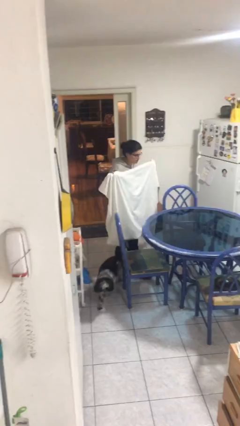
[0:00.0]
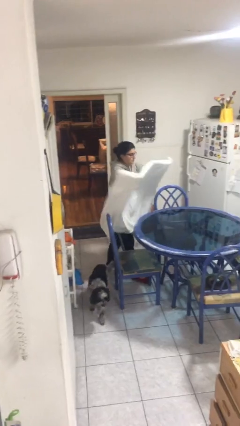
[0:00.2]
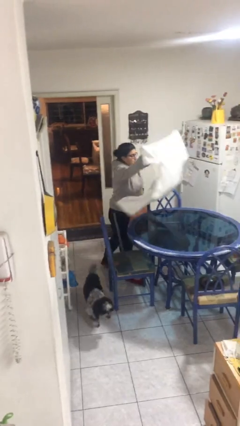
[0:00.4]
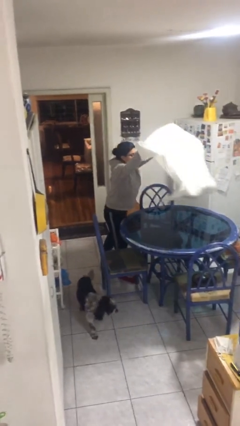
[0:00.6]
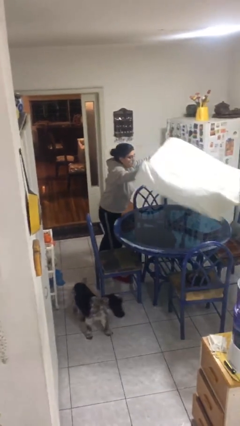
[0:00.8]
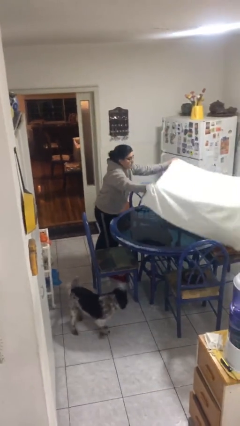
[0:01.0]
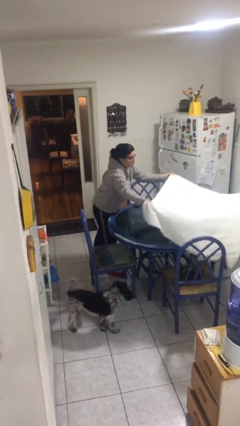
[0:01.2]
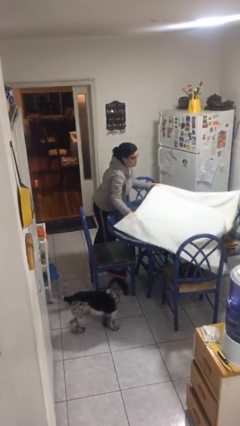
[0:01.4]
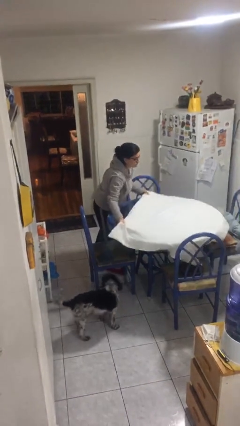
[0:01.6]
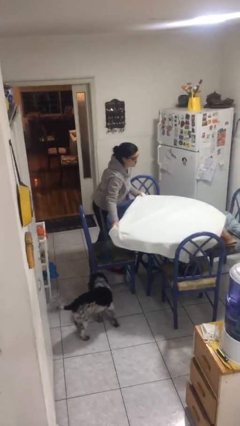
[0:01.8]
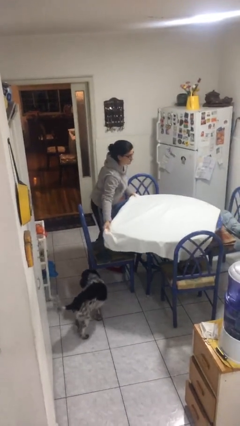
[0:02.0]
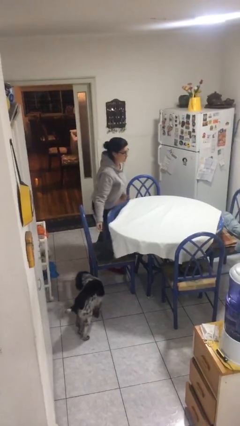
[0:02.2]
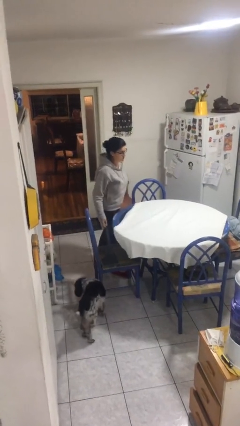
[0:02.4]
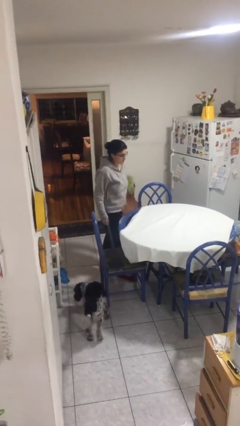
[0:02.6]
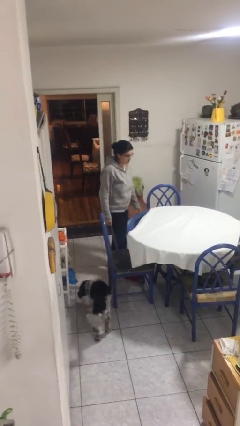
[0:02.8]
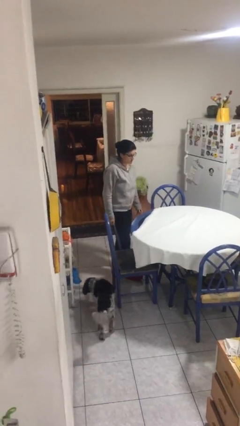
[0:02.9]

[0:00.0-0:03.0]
person spreads tablecloth

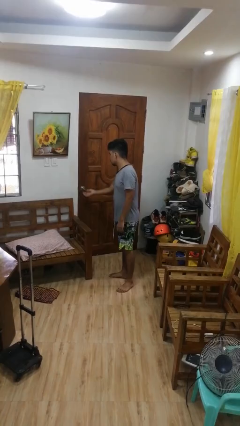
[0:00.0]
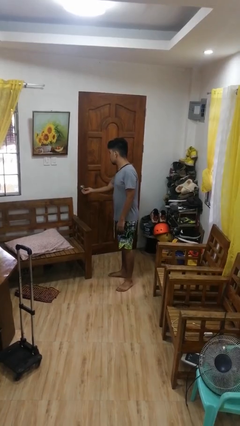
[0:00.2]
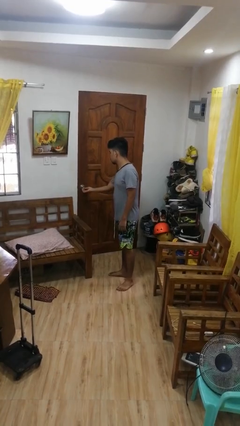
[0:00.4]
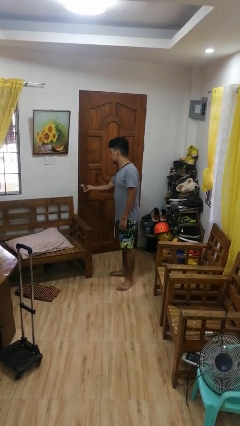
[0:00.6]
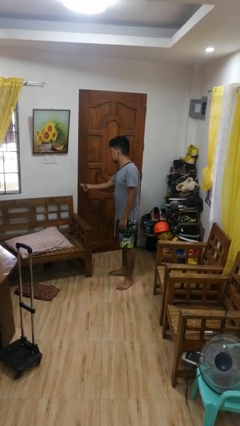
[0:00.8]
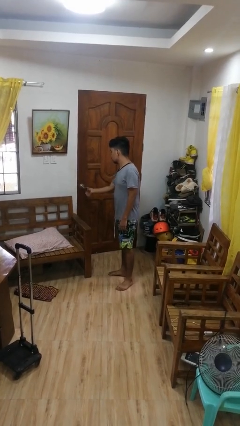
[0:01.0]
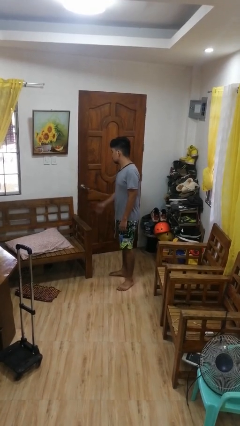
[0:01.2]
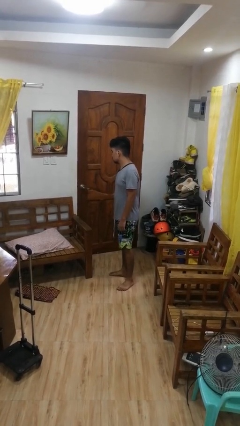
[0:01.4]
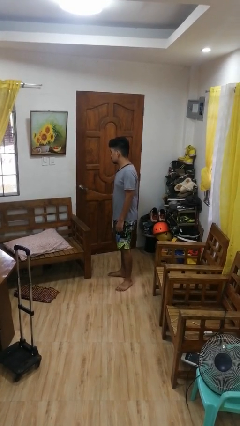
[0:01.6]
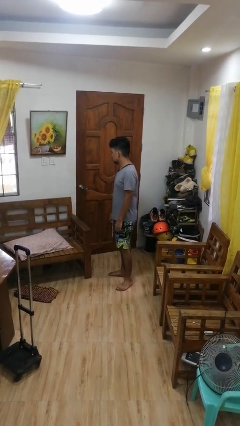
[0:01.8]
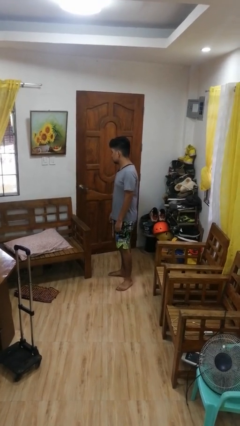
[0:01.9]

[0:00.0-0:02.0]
person locks door with keys

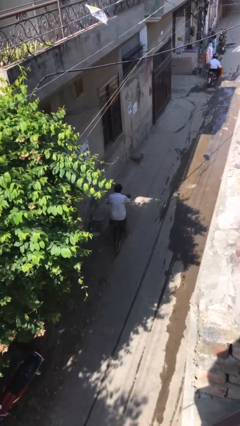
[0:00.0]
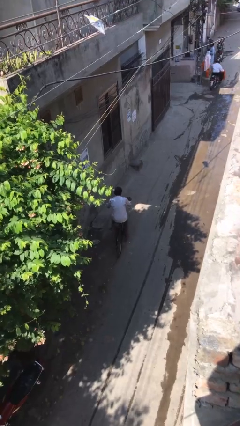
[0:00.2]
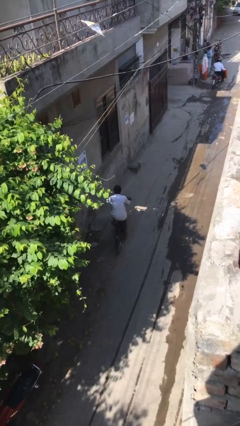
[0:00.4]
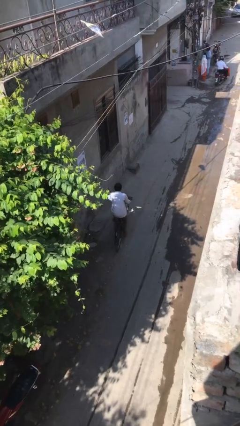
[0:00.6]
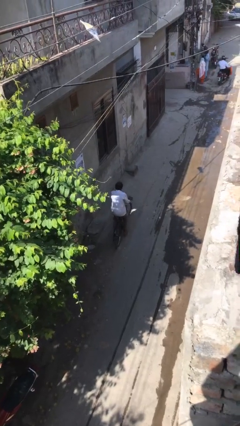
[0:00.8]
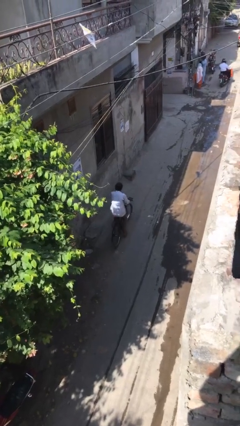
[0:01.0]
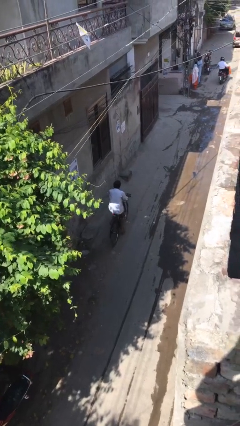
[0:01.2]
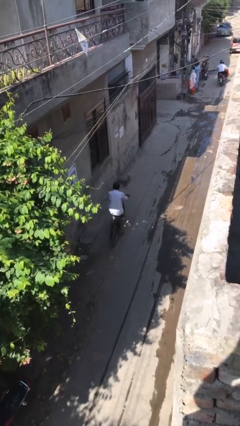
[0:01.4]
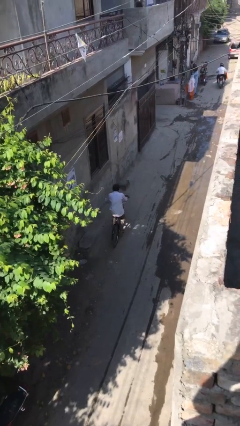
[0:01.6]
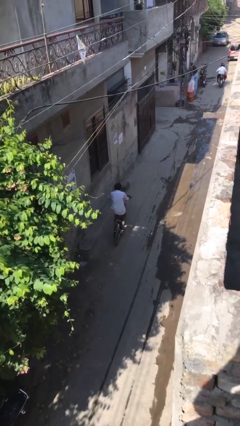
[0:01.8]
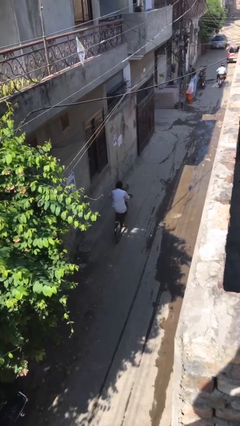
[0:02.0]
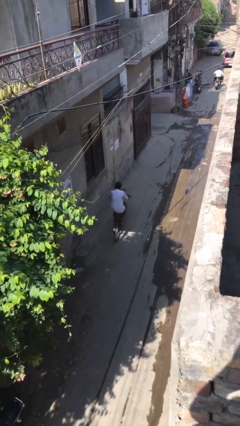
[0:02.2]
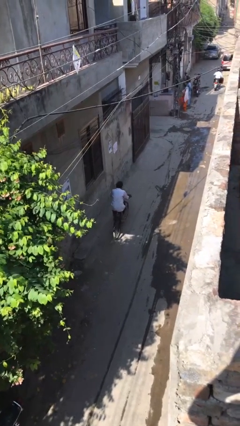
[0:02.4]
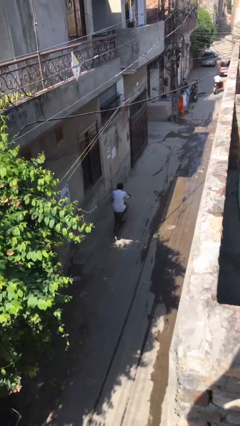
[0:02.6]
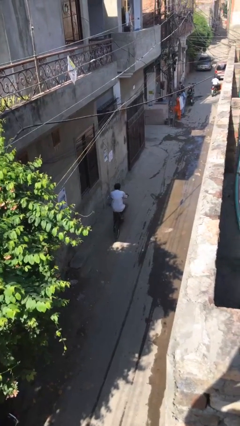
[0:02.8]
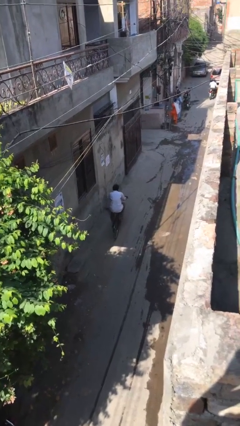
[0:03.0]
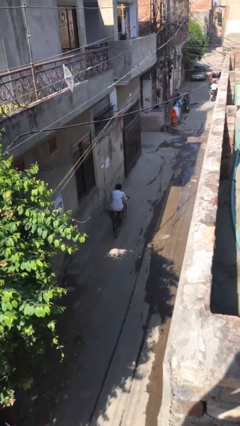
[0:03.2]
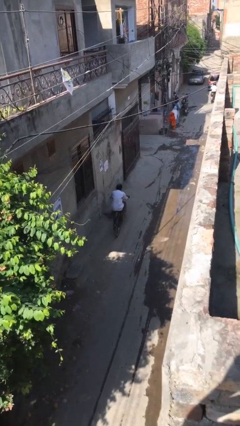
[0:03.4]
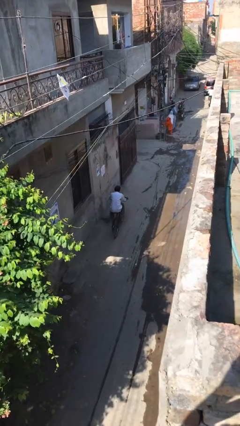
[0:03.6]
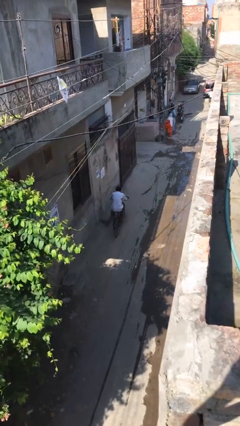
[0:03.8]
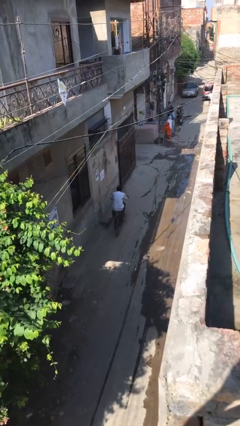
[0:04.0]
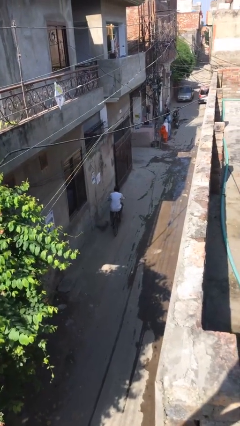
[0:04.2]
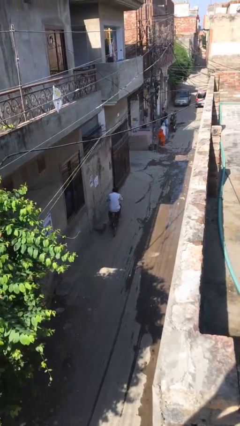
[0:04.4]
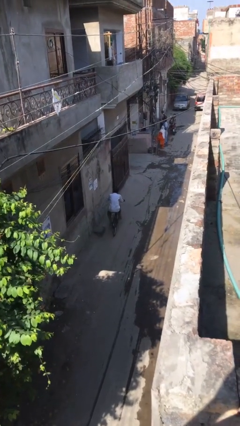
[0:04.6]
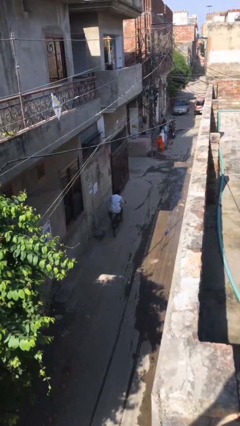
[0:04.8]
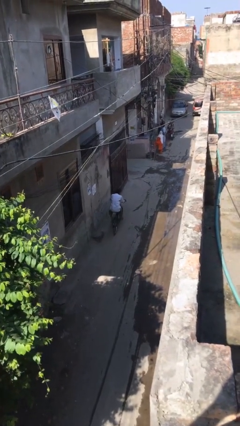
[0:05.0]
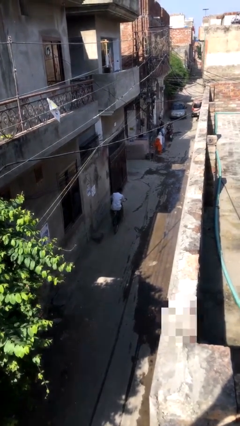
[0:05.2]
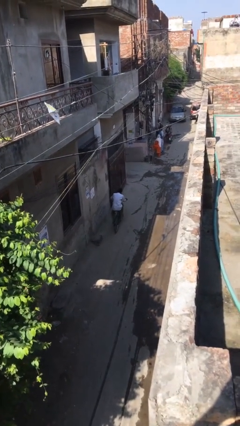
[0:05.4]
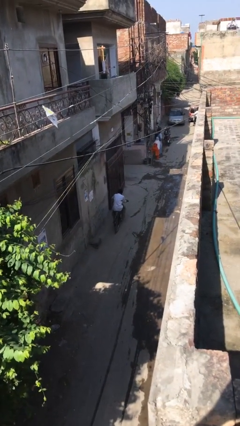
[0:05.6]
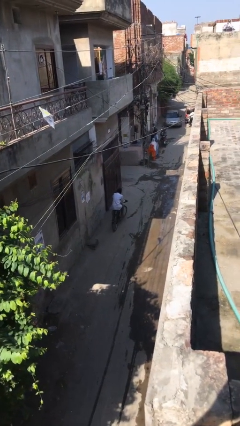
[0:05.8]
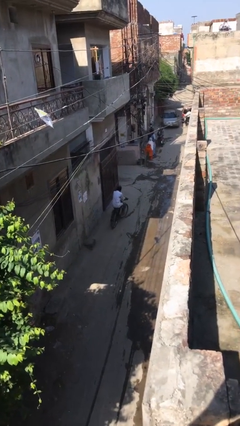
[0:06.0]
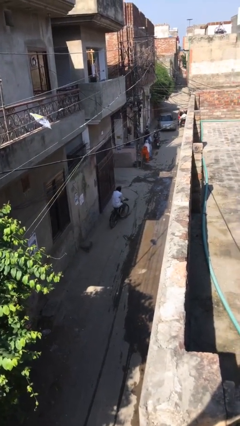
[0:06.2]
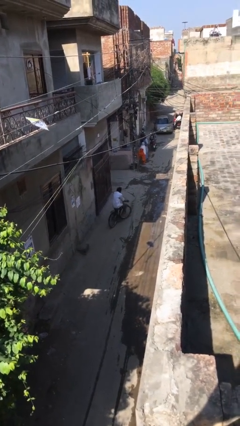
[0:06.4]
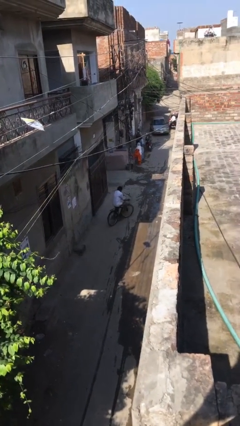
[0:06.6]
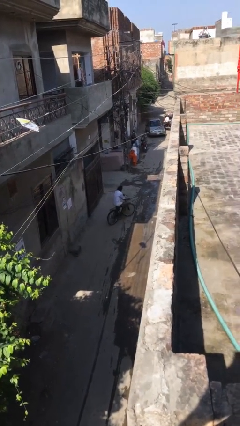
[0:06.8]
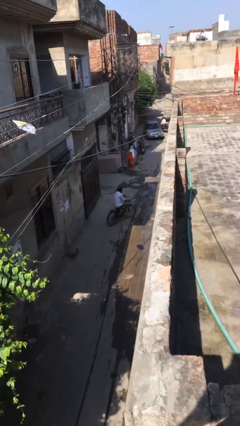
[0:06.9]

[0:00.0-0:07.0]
person rides bicycle

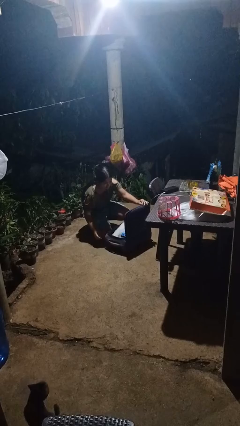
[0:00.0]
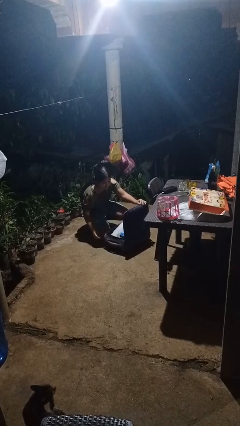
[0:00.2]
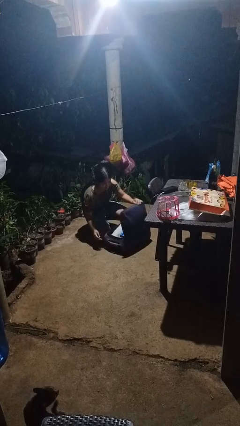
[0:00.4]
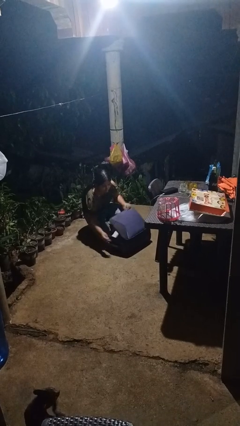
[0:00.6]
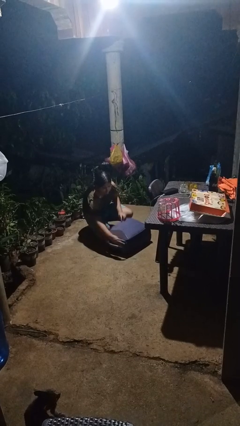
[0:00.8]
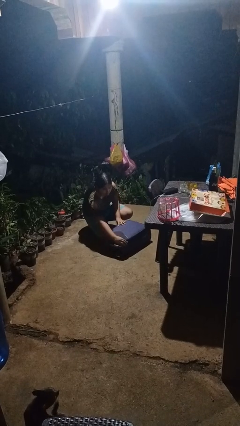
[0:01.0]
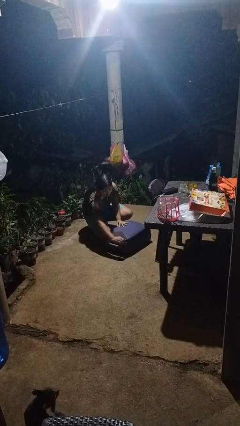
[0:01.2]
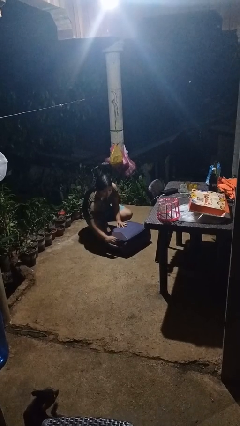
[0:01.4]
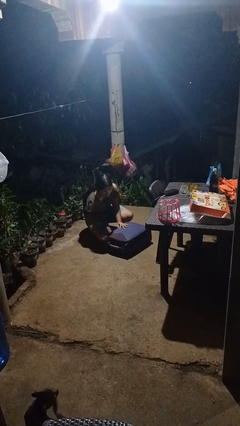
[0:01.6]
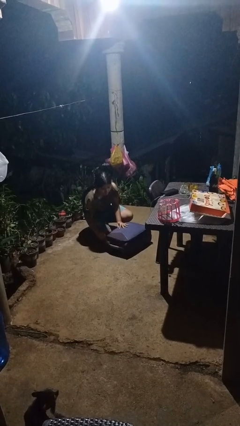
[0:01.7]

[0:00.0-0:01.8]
person closes suitcase

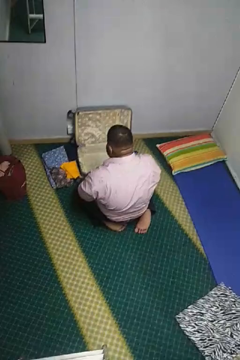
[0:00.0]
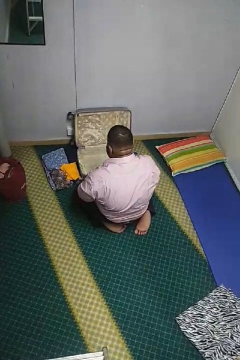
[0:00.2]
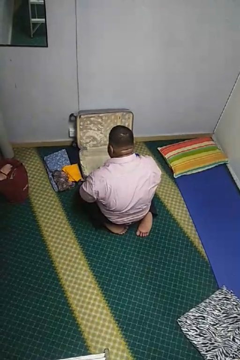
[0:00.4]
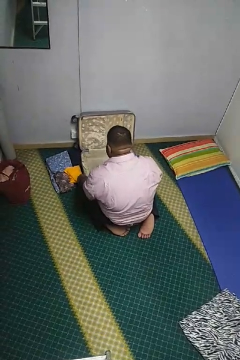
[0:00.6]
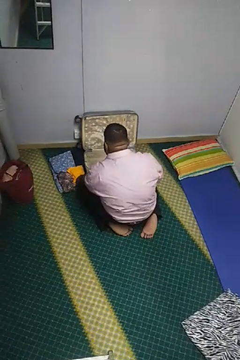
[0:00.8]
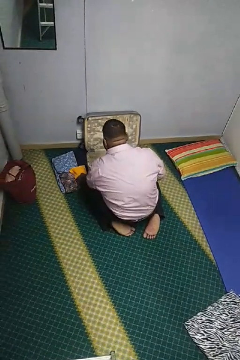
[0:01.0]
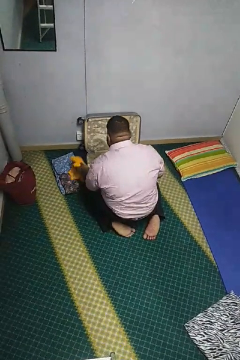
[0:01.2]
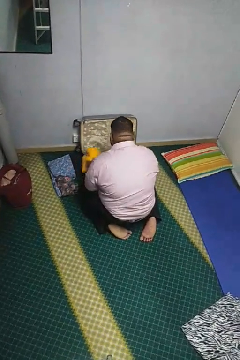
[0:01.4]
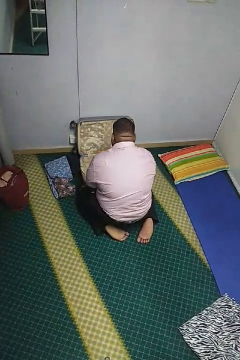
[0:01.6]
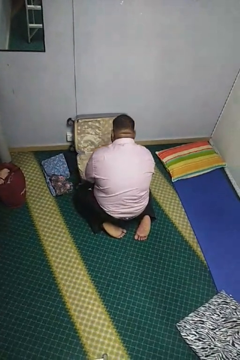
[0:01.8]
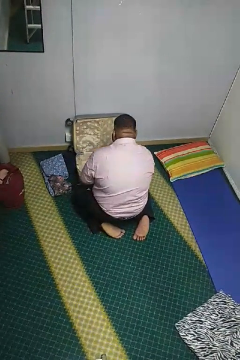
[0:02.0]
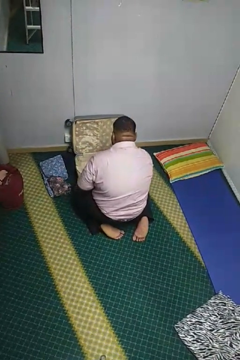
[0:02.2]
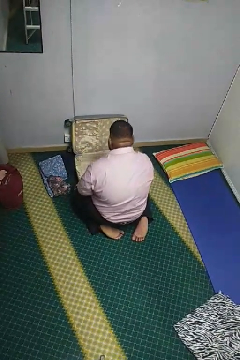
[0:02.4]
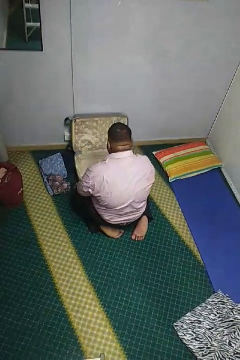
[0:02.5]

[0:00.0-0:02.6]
person loads clothes into suitcase

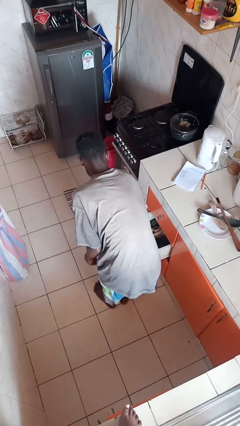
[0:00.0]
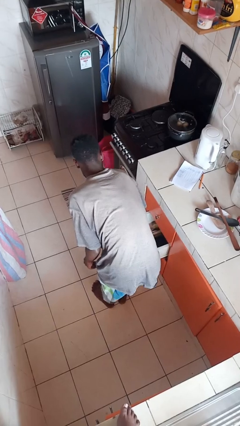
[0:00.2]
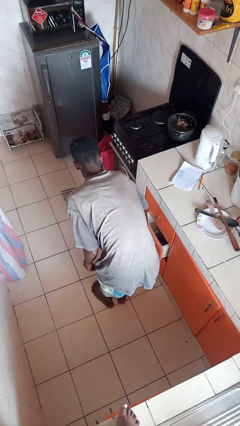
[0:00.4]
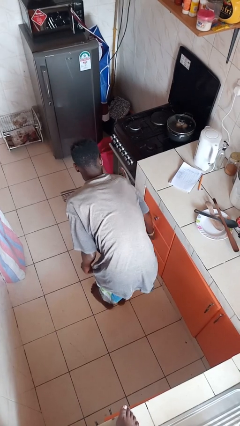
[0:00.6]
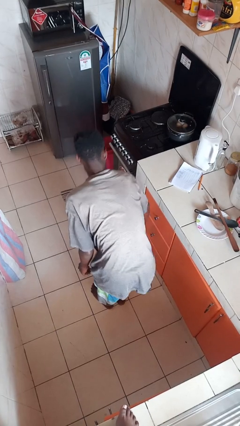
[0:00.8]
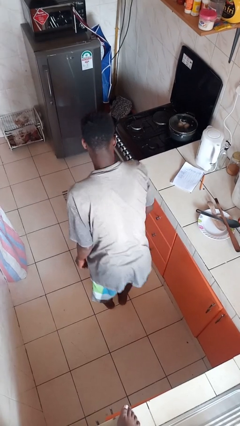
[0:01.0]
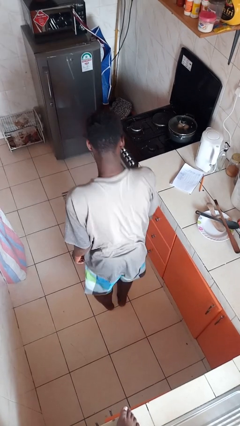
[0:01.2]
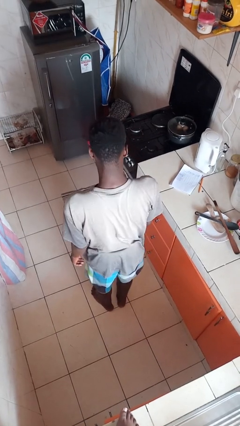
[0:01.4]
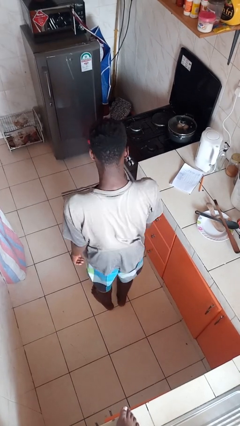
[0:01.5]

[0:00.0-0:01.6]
person closes clothes washer
